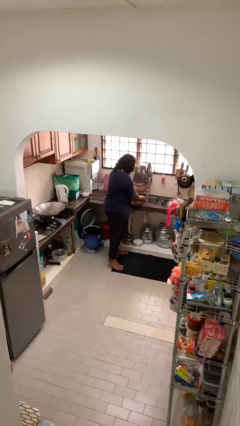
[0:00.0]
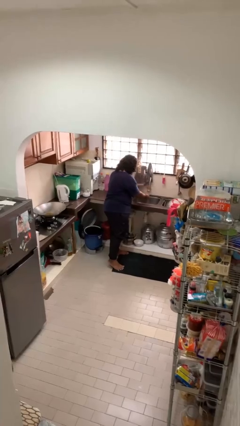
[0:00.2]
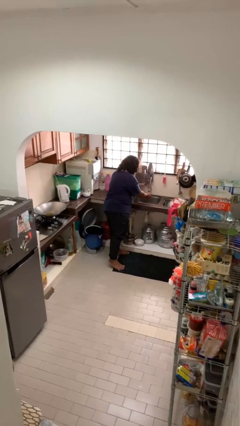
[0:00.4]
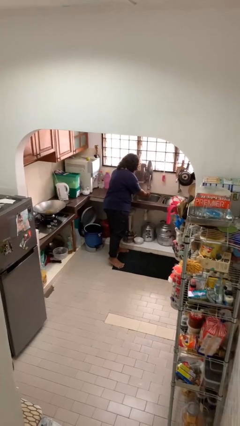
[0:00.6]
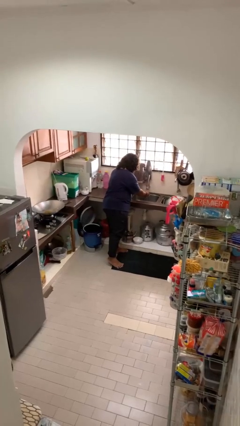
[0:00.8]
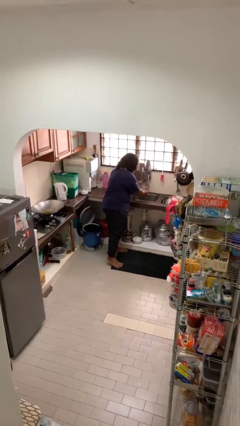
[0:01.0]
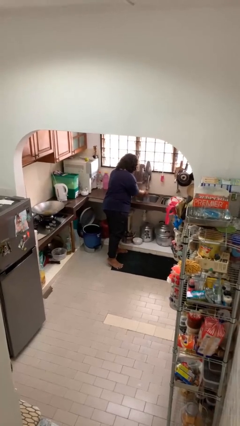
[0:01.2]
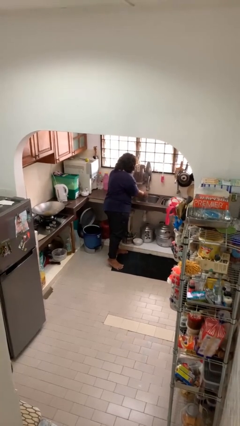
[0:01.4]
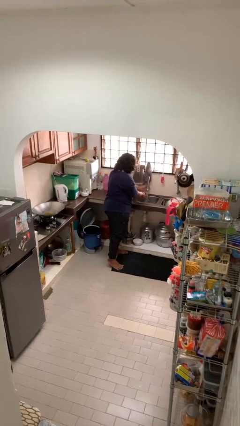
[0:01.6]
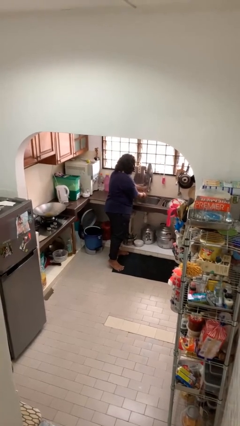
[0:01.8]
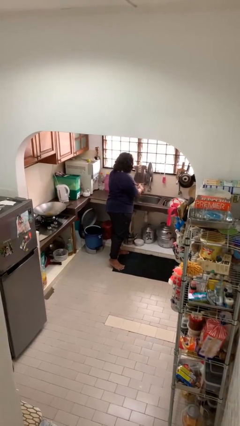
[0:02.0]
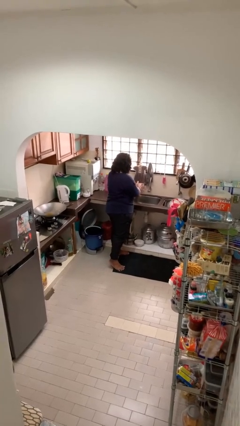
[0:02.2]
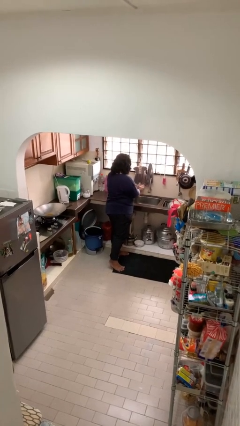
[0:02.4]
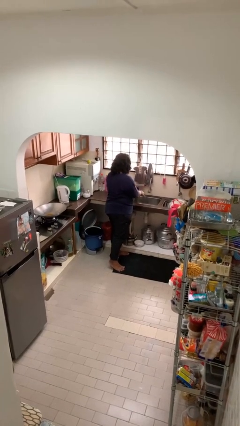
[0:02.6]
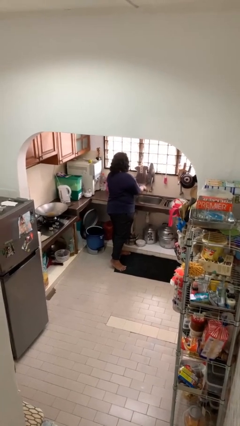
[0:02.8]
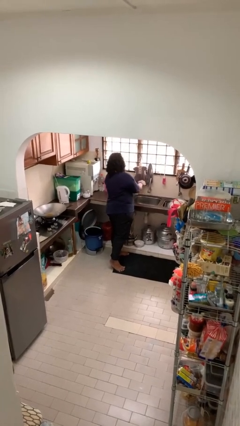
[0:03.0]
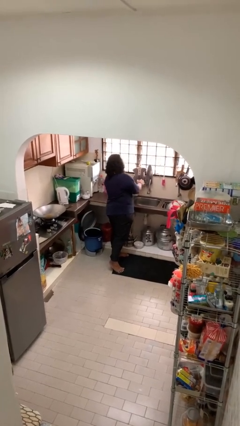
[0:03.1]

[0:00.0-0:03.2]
person washes hands

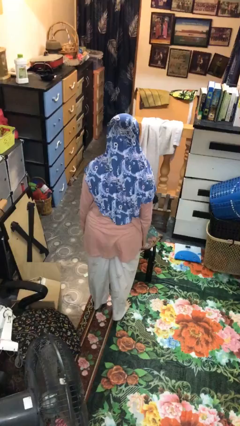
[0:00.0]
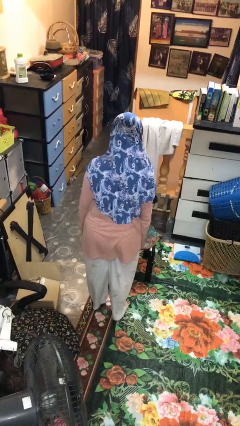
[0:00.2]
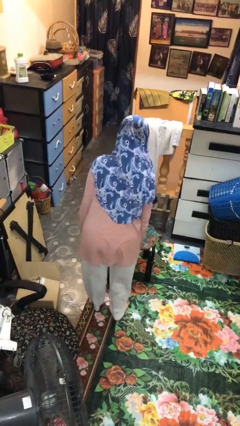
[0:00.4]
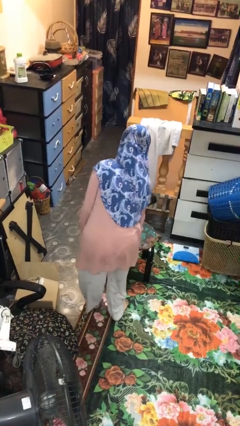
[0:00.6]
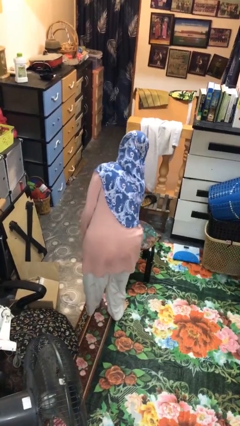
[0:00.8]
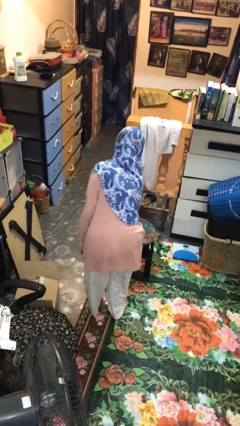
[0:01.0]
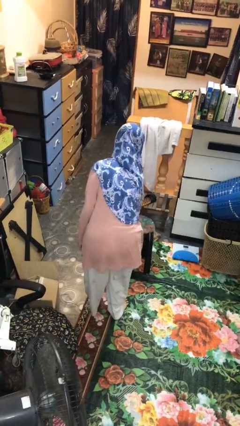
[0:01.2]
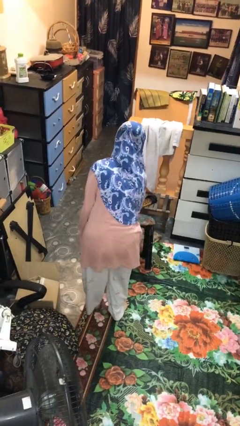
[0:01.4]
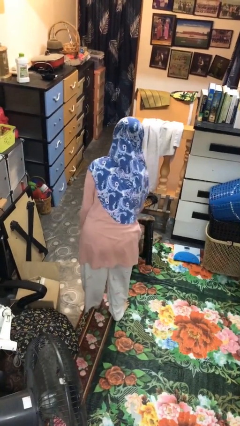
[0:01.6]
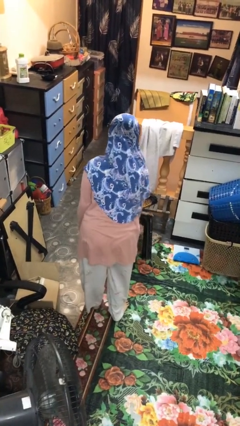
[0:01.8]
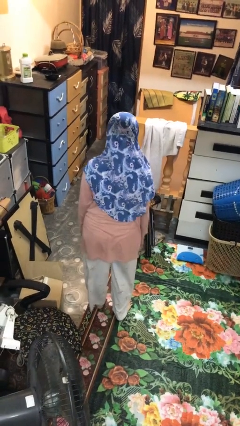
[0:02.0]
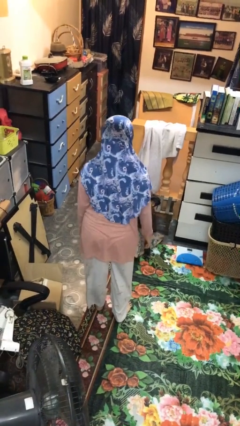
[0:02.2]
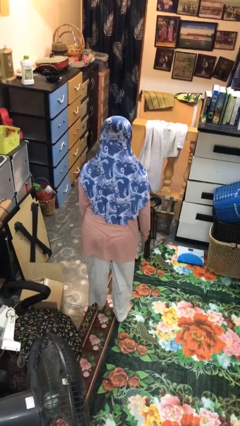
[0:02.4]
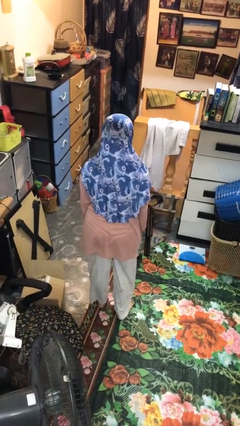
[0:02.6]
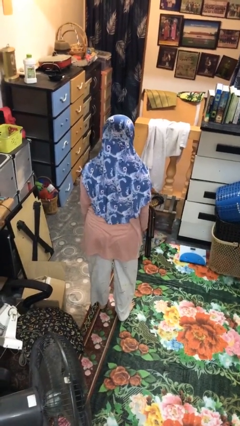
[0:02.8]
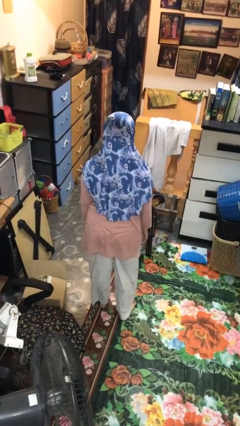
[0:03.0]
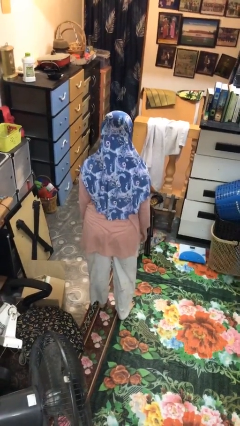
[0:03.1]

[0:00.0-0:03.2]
person knocks over furniture

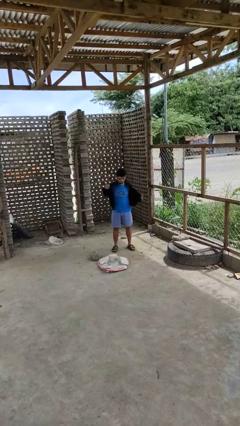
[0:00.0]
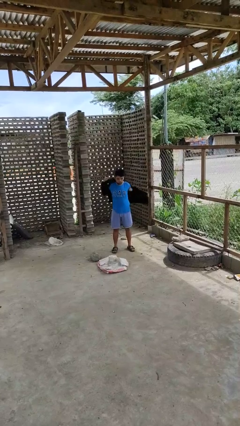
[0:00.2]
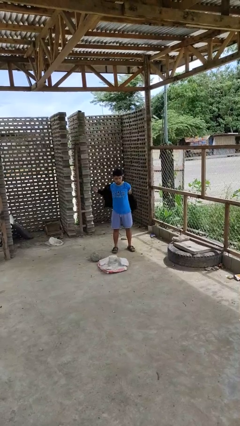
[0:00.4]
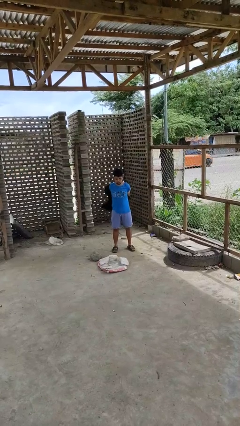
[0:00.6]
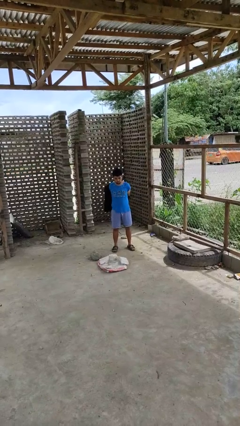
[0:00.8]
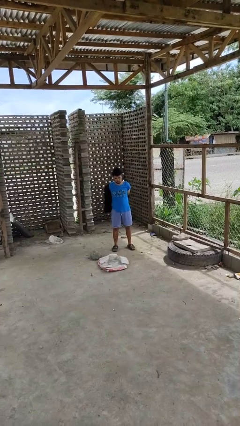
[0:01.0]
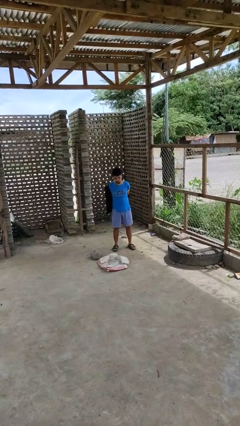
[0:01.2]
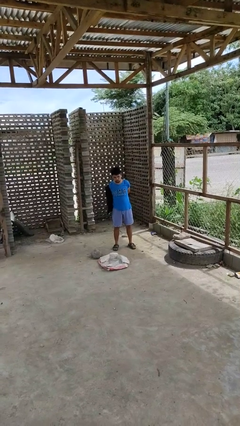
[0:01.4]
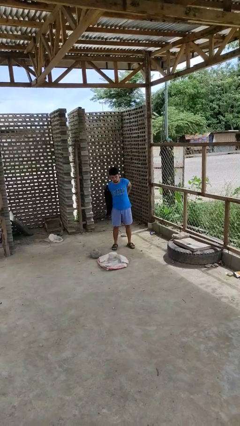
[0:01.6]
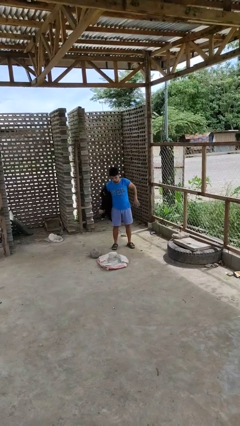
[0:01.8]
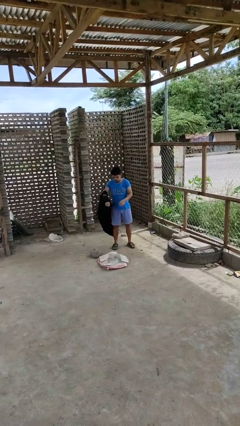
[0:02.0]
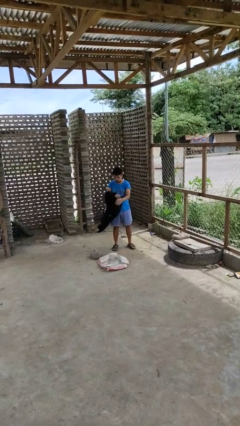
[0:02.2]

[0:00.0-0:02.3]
person takes off jacket

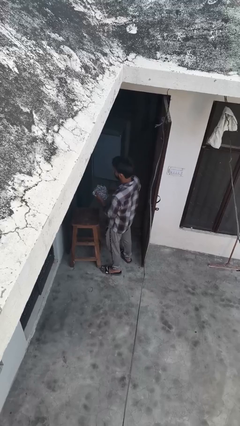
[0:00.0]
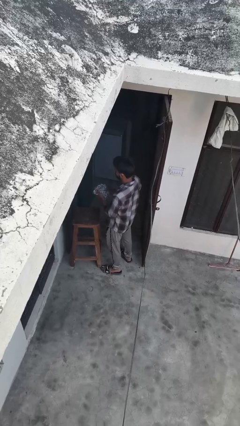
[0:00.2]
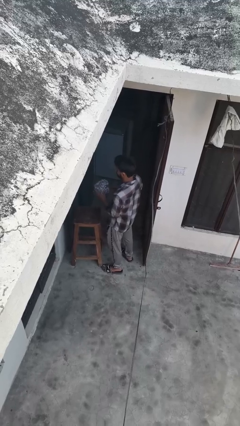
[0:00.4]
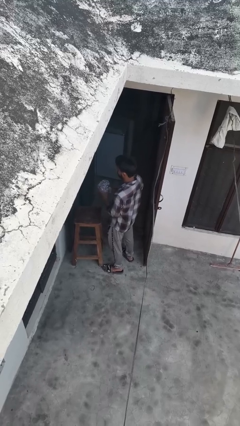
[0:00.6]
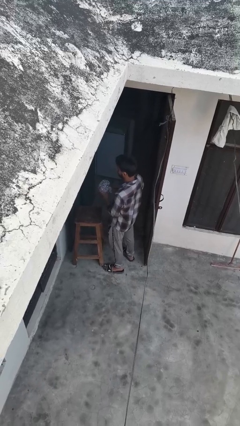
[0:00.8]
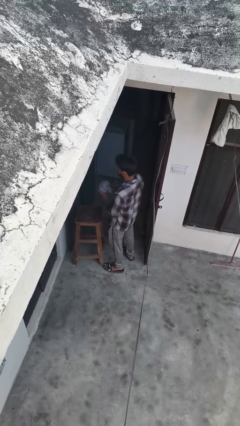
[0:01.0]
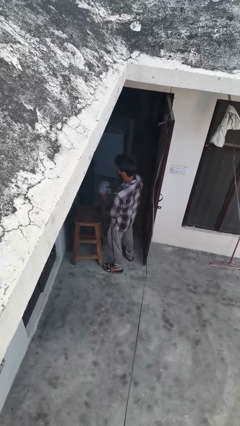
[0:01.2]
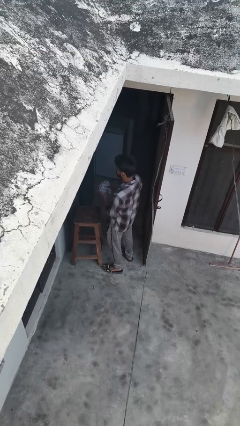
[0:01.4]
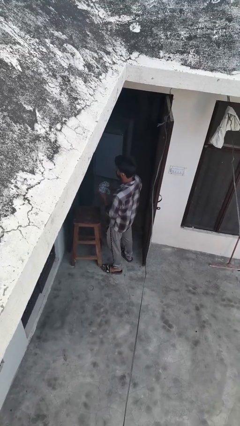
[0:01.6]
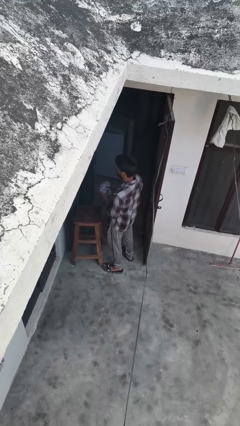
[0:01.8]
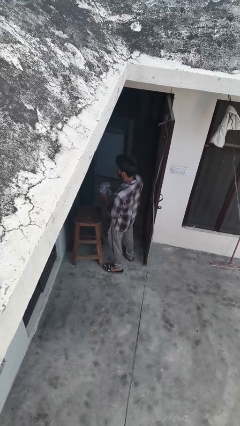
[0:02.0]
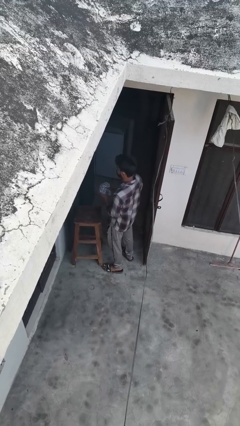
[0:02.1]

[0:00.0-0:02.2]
person squeezes object

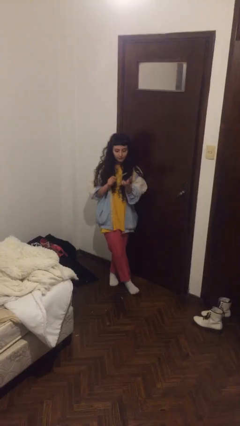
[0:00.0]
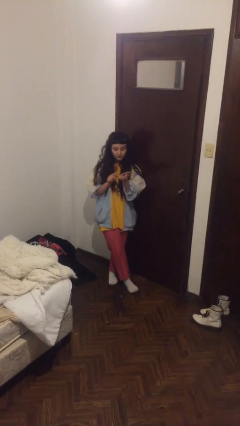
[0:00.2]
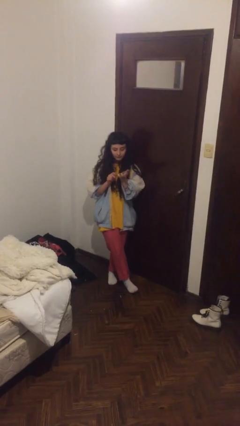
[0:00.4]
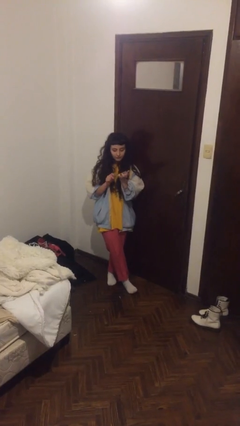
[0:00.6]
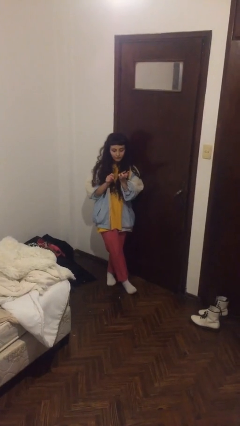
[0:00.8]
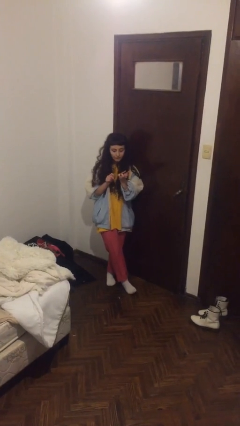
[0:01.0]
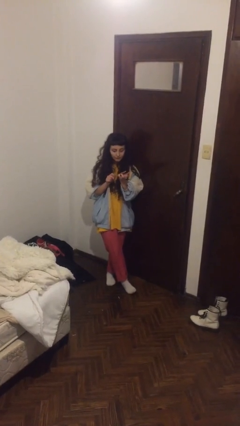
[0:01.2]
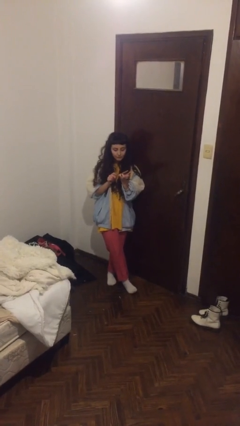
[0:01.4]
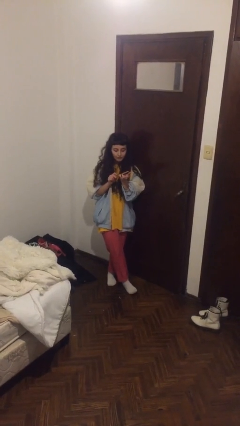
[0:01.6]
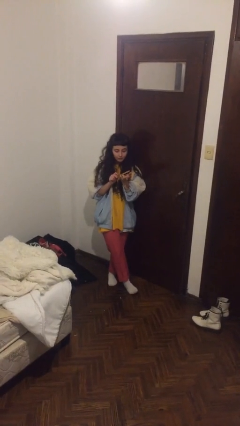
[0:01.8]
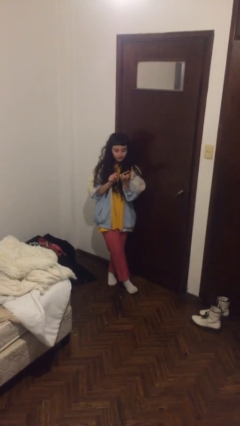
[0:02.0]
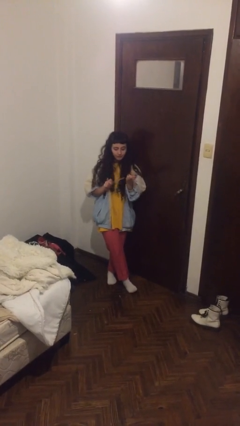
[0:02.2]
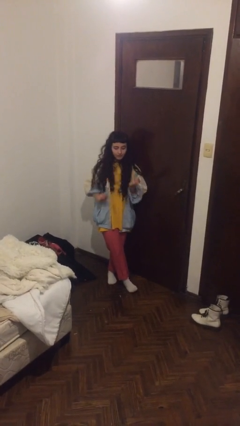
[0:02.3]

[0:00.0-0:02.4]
person files fingernails

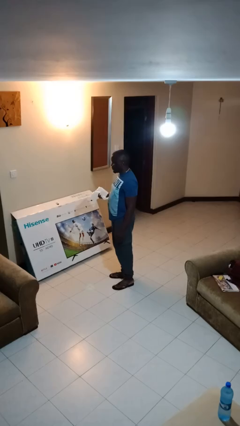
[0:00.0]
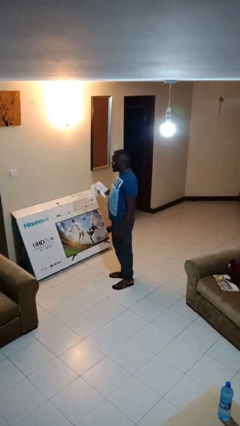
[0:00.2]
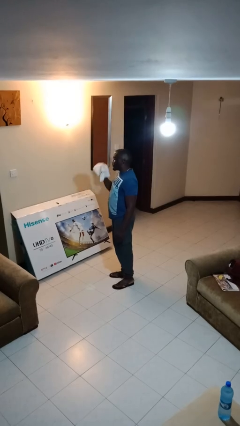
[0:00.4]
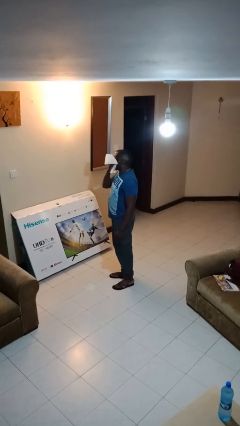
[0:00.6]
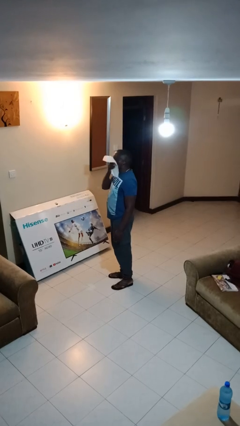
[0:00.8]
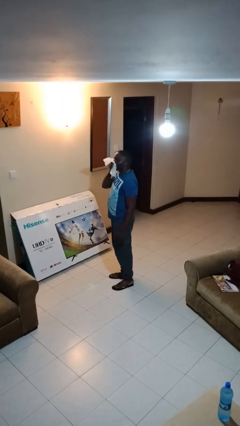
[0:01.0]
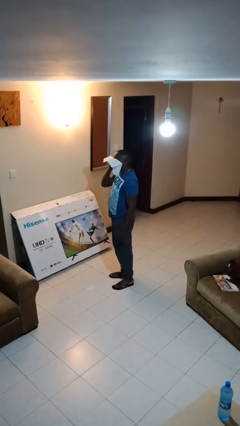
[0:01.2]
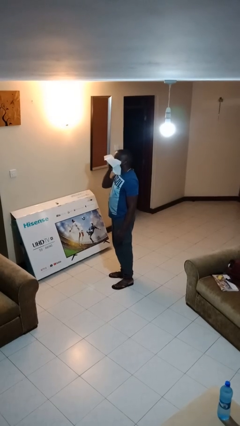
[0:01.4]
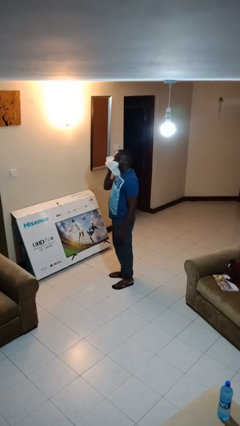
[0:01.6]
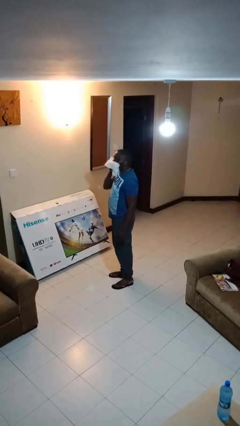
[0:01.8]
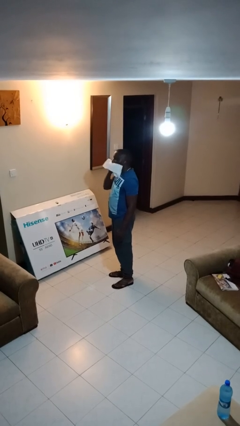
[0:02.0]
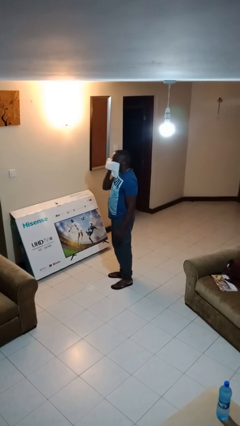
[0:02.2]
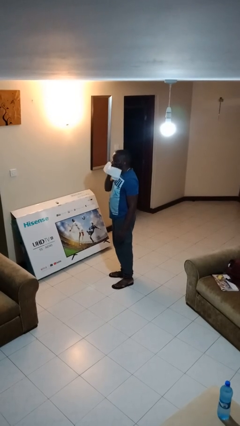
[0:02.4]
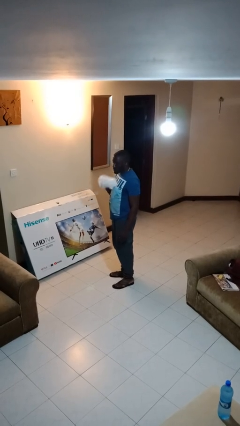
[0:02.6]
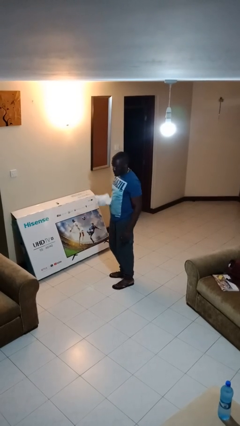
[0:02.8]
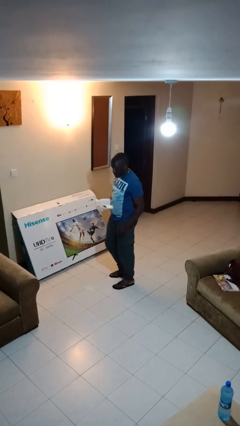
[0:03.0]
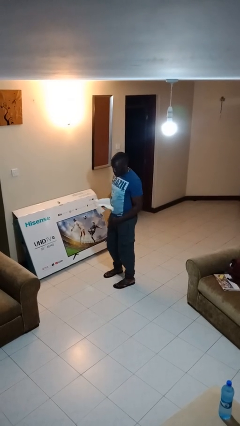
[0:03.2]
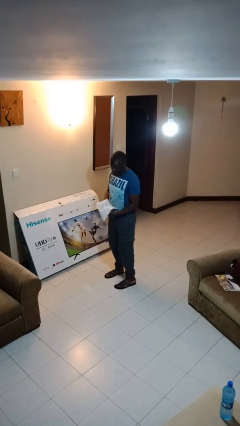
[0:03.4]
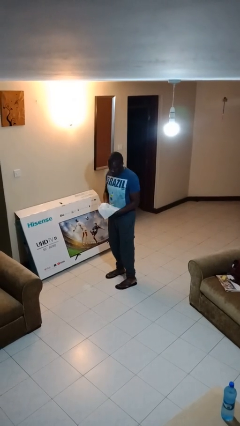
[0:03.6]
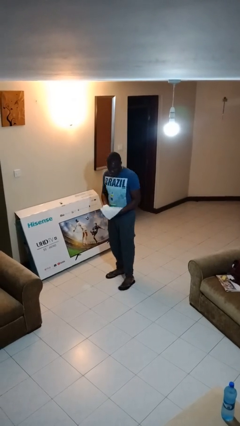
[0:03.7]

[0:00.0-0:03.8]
person wipes mouth with napkin

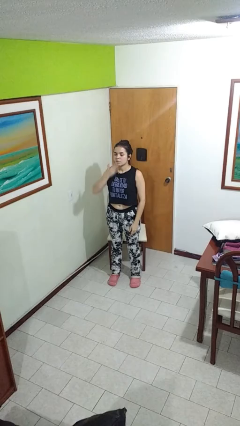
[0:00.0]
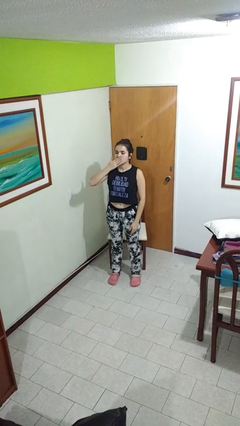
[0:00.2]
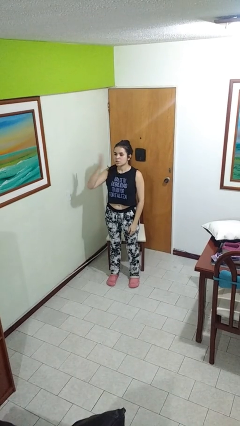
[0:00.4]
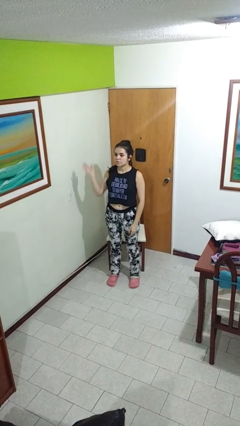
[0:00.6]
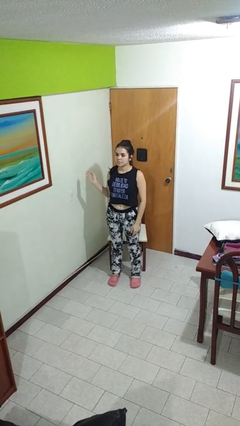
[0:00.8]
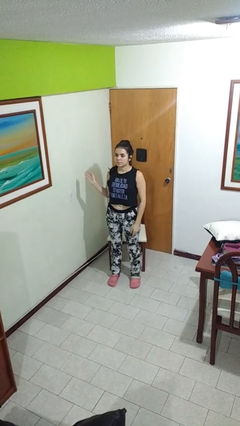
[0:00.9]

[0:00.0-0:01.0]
person gestures blow kiss
